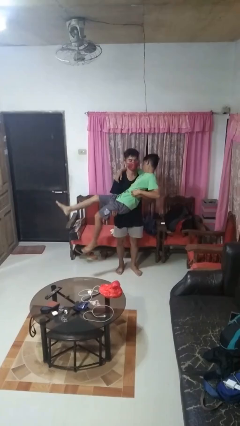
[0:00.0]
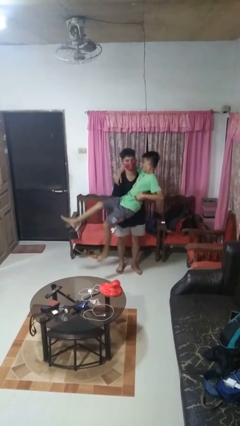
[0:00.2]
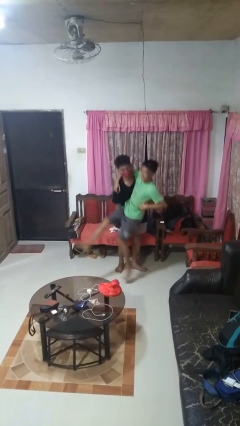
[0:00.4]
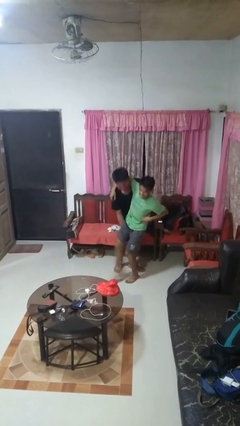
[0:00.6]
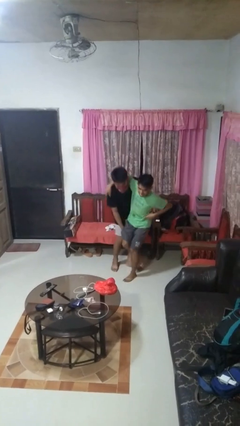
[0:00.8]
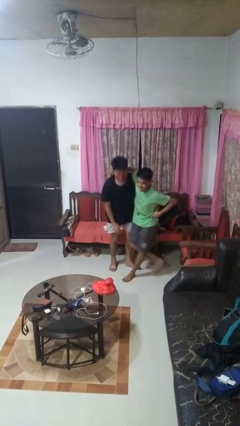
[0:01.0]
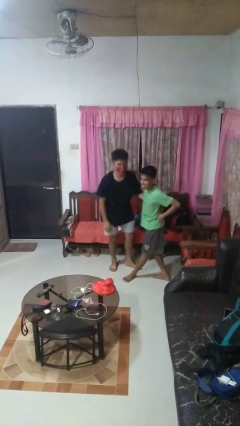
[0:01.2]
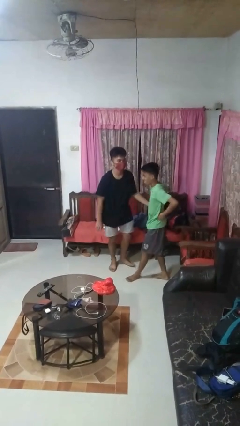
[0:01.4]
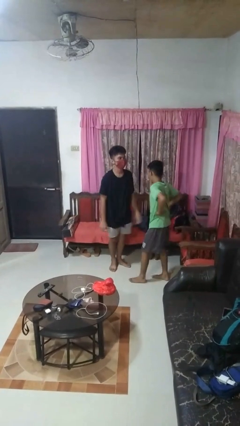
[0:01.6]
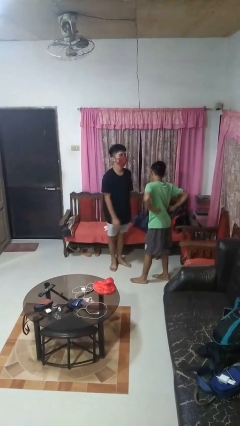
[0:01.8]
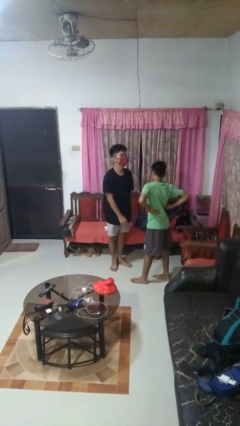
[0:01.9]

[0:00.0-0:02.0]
person puts down person

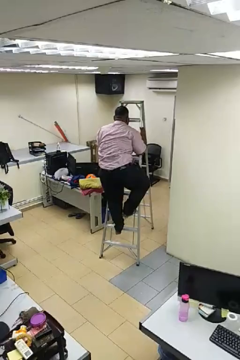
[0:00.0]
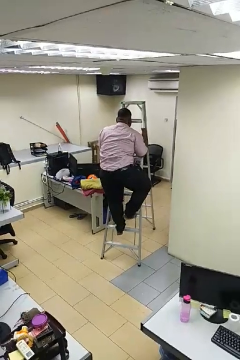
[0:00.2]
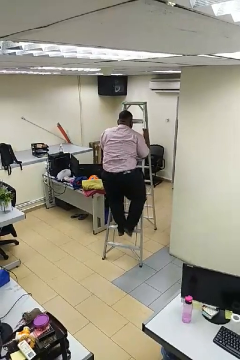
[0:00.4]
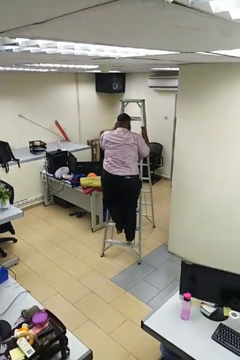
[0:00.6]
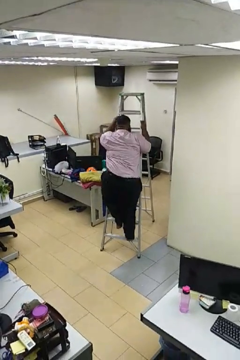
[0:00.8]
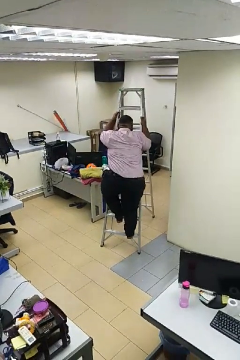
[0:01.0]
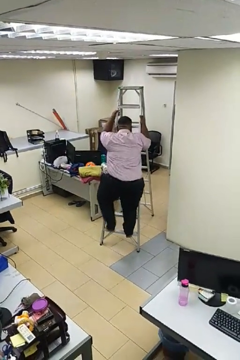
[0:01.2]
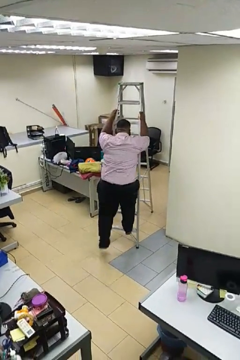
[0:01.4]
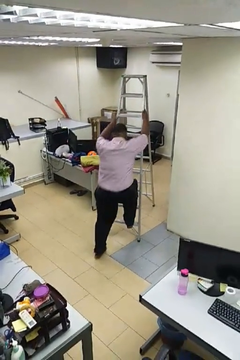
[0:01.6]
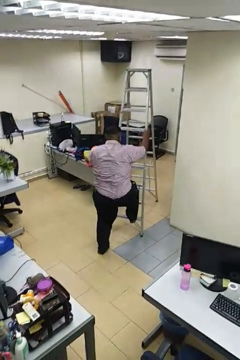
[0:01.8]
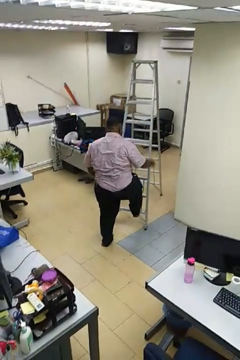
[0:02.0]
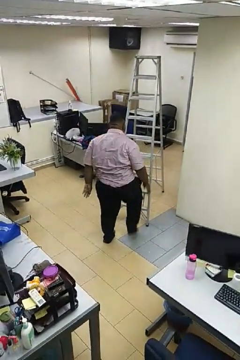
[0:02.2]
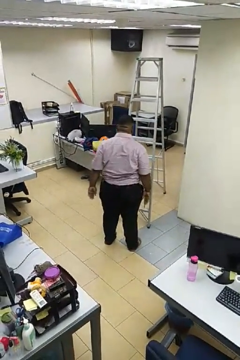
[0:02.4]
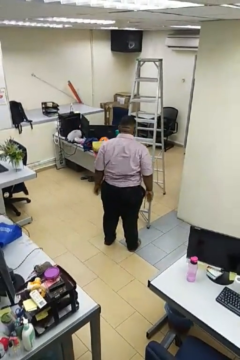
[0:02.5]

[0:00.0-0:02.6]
person climbs down ladder

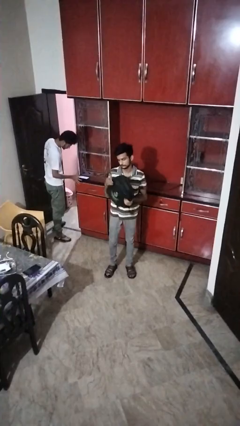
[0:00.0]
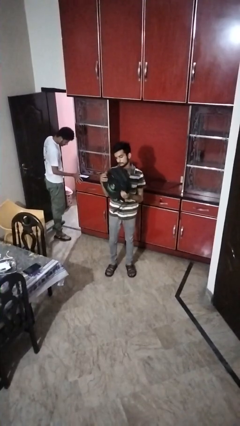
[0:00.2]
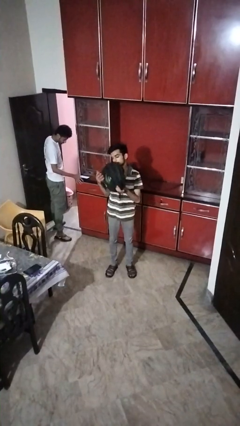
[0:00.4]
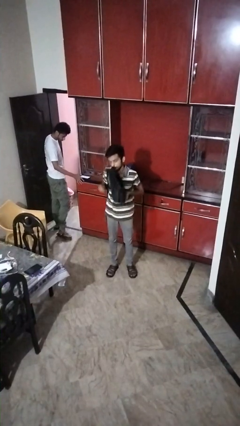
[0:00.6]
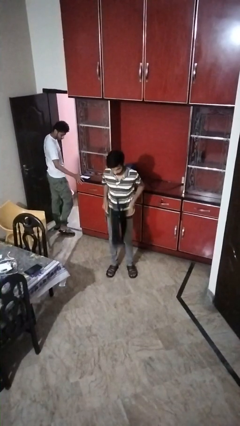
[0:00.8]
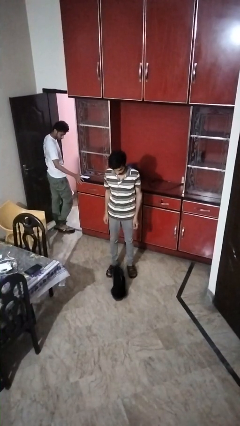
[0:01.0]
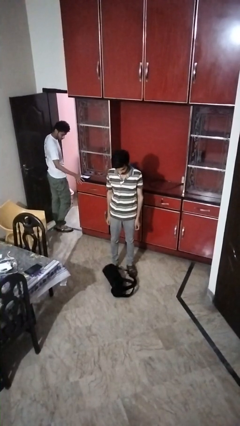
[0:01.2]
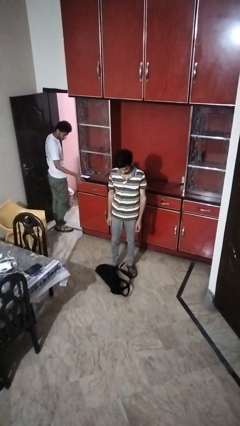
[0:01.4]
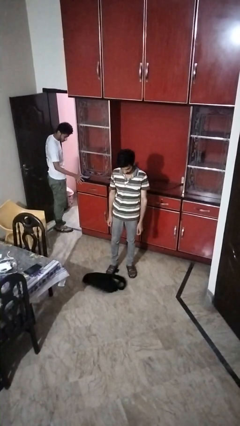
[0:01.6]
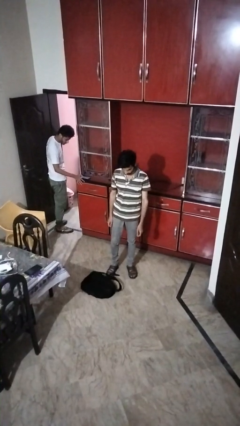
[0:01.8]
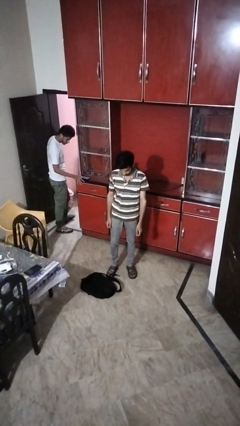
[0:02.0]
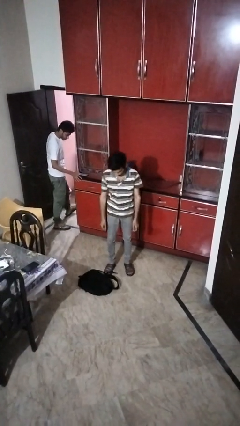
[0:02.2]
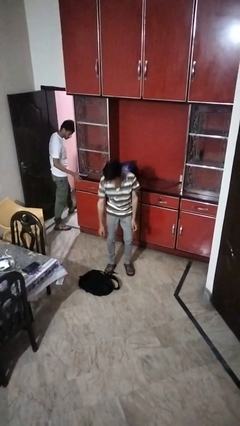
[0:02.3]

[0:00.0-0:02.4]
person drops object

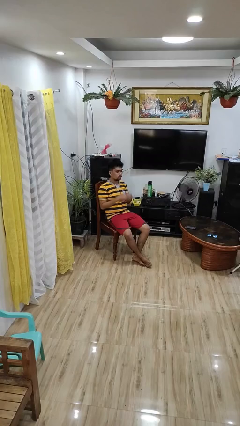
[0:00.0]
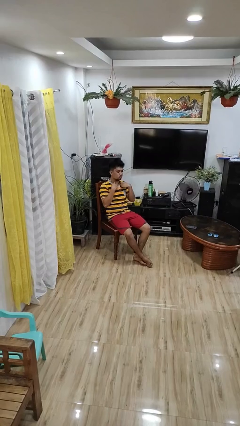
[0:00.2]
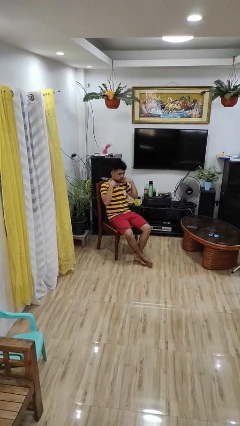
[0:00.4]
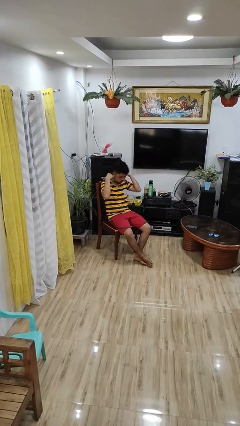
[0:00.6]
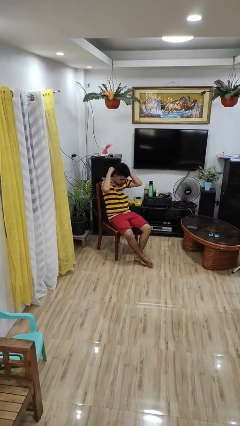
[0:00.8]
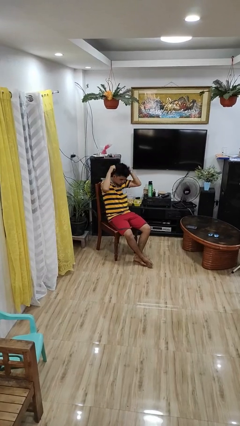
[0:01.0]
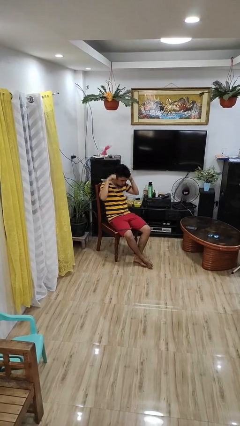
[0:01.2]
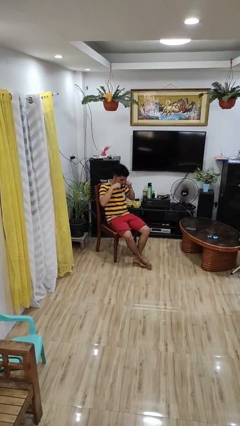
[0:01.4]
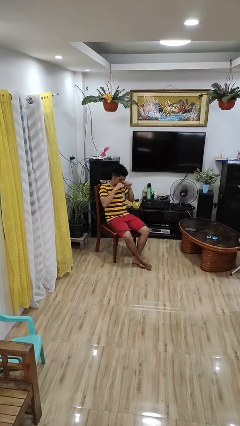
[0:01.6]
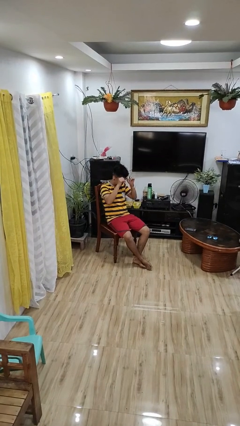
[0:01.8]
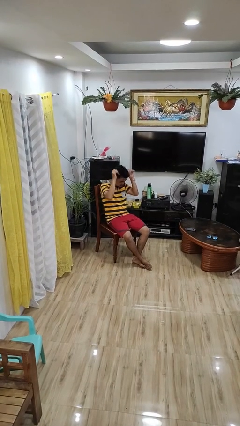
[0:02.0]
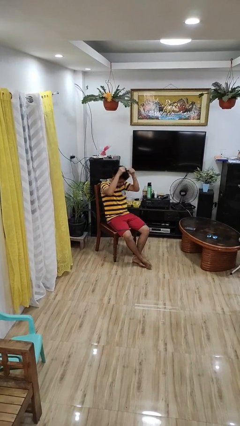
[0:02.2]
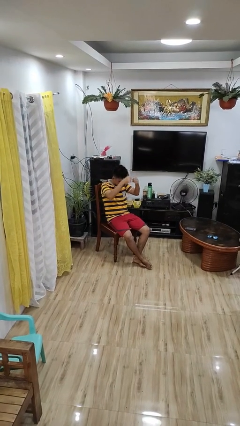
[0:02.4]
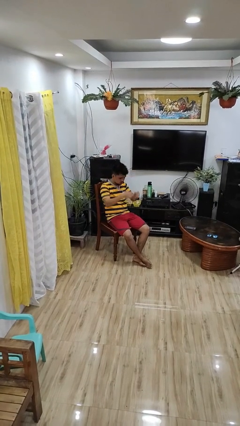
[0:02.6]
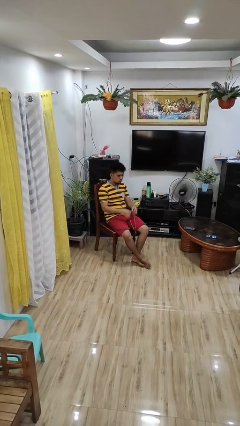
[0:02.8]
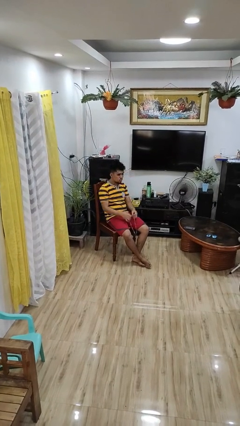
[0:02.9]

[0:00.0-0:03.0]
person takes off necklace

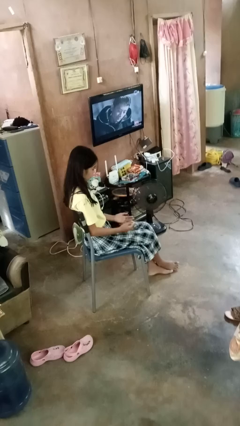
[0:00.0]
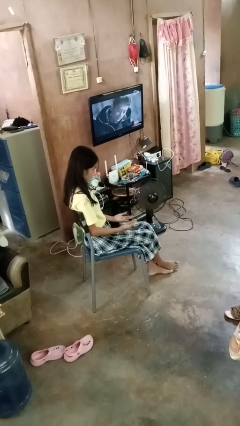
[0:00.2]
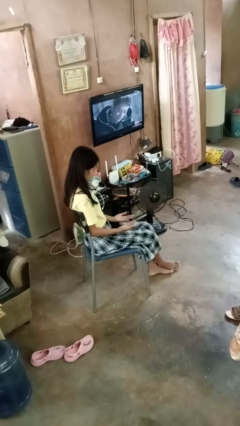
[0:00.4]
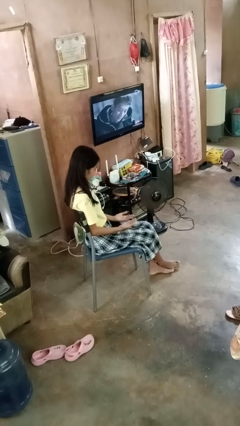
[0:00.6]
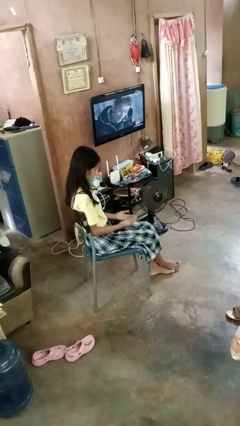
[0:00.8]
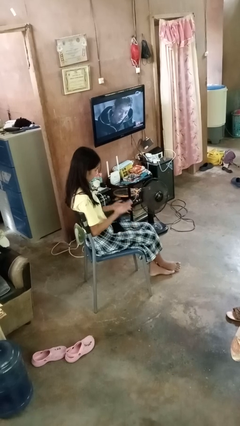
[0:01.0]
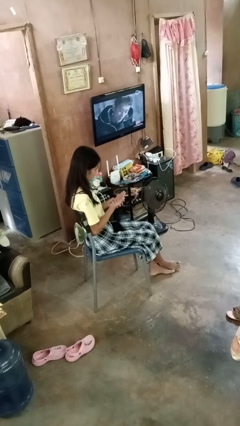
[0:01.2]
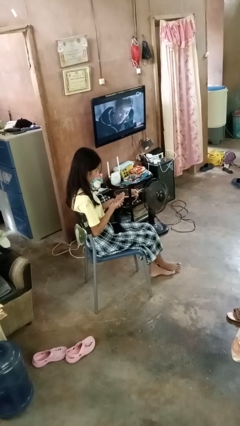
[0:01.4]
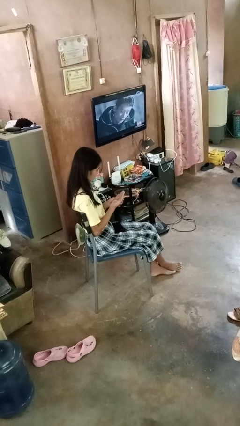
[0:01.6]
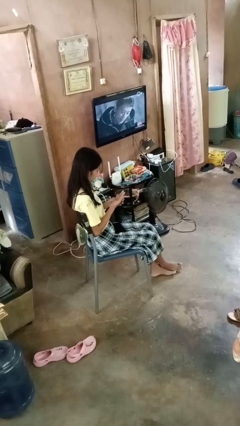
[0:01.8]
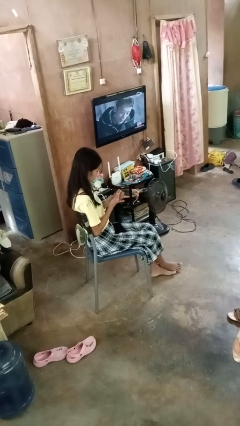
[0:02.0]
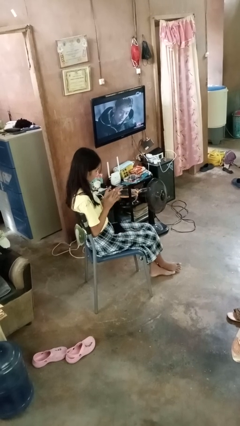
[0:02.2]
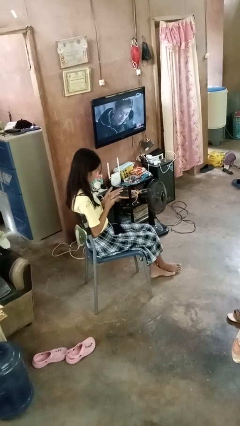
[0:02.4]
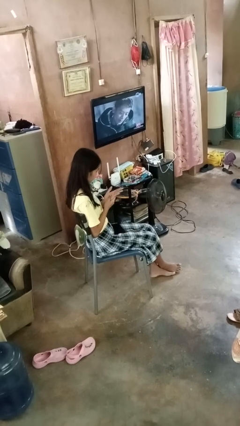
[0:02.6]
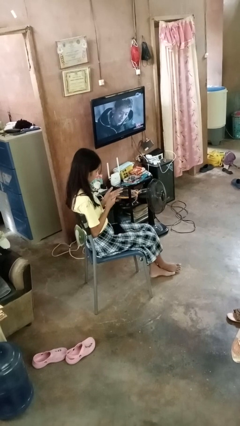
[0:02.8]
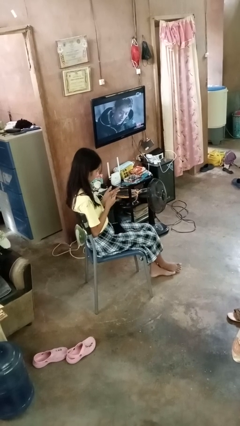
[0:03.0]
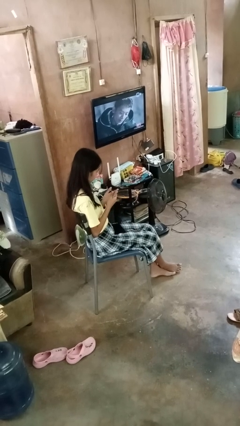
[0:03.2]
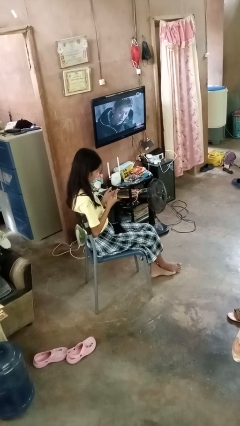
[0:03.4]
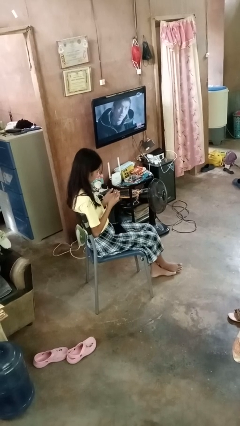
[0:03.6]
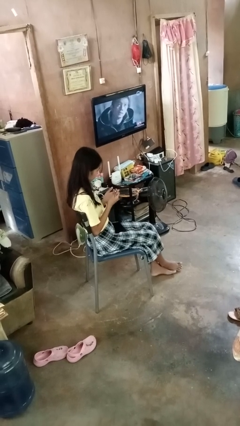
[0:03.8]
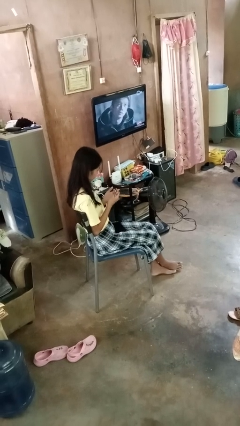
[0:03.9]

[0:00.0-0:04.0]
person looks at hands in lap

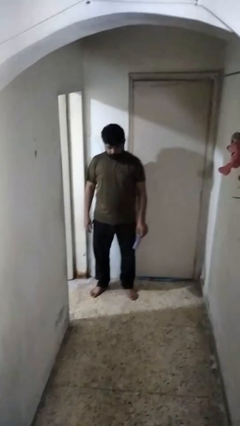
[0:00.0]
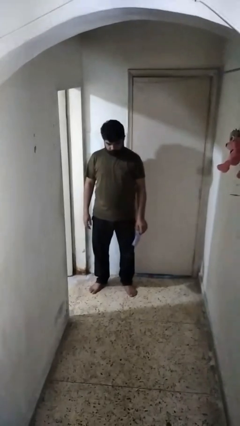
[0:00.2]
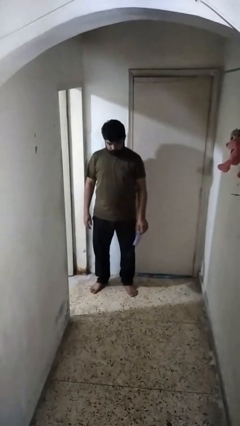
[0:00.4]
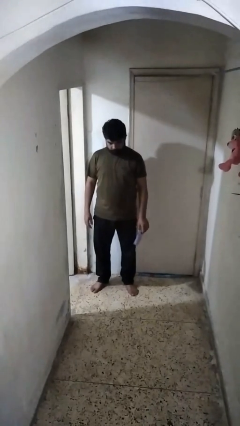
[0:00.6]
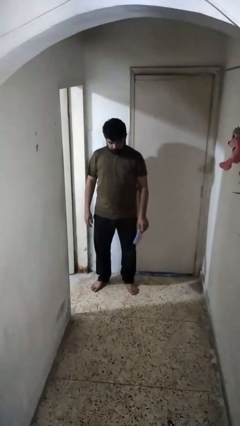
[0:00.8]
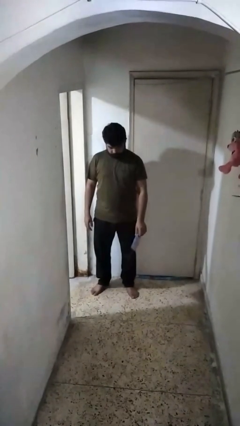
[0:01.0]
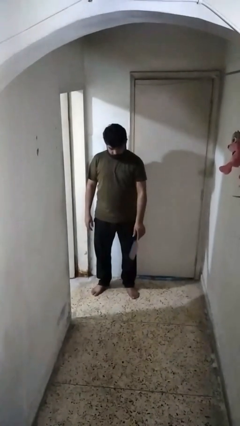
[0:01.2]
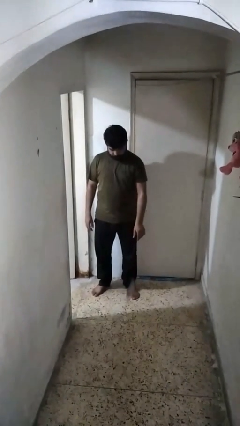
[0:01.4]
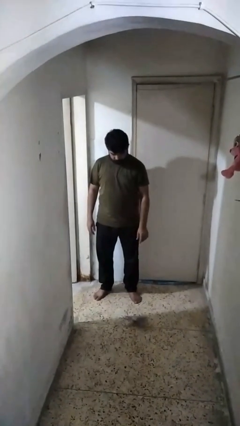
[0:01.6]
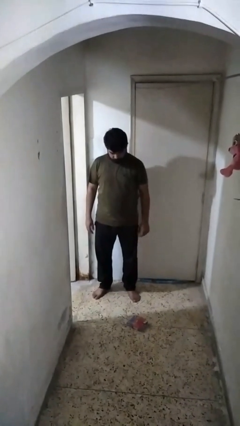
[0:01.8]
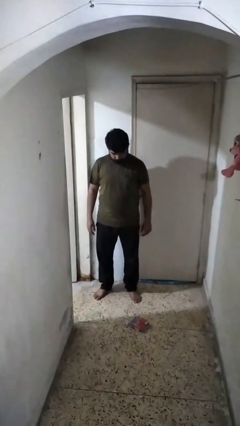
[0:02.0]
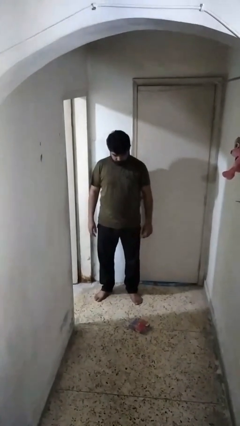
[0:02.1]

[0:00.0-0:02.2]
person throws object to ground

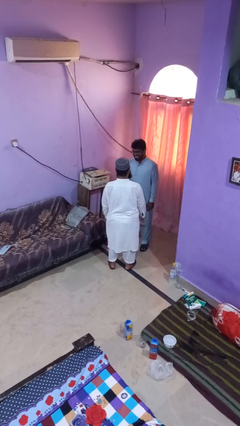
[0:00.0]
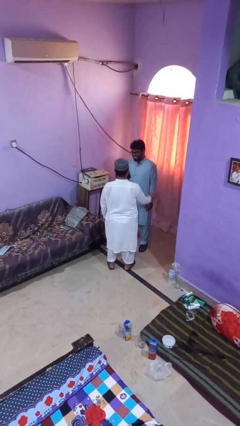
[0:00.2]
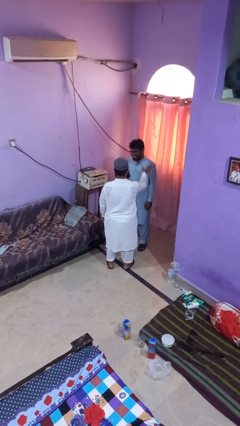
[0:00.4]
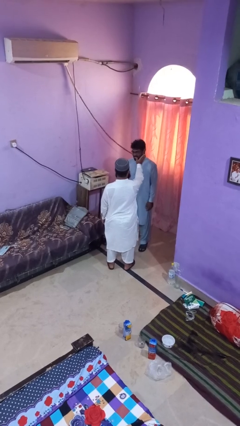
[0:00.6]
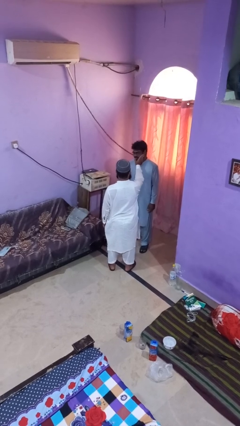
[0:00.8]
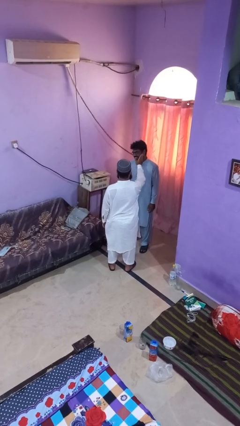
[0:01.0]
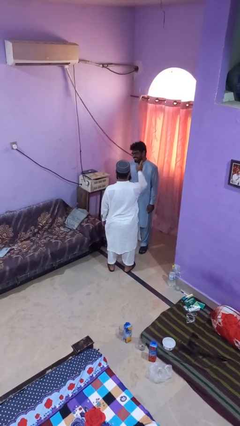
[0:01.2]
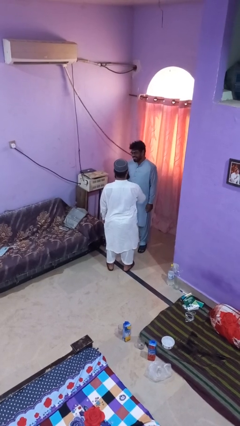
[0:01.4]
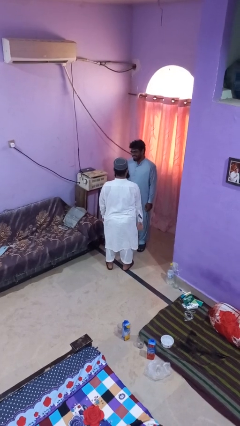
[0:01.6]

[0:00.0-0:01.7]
person touches face of person

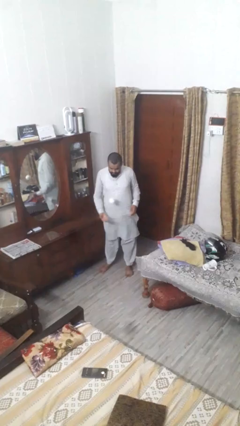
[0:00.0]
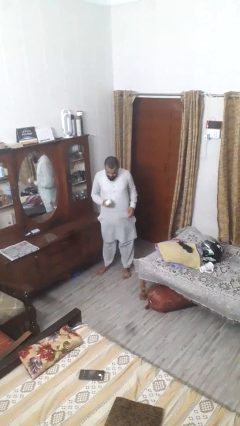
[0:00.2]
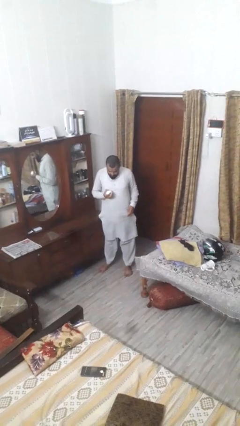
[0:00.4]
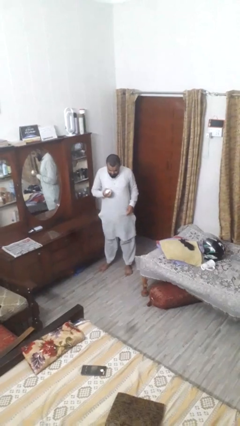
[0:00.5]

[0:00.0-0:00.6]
person bounces ball on floor
